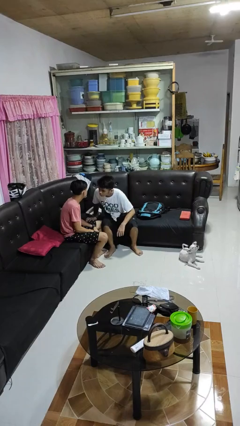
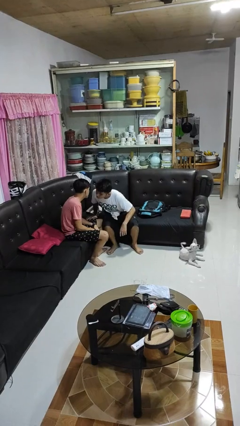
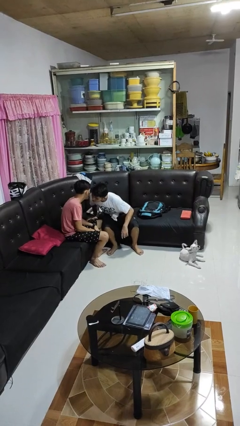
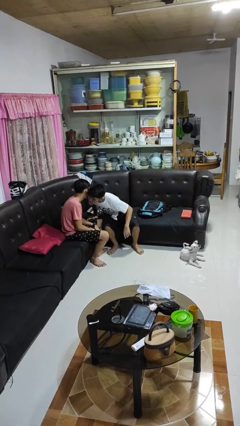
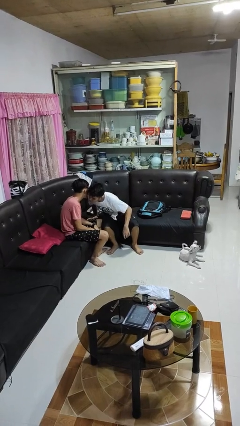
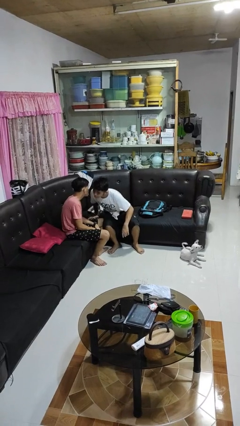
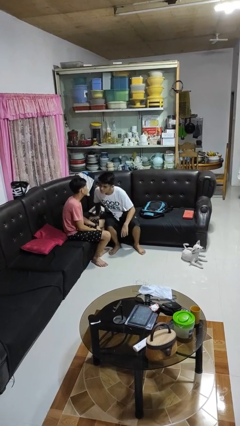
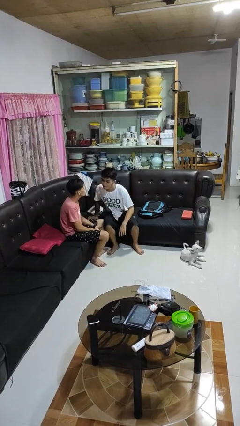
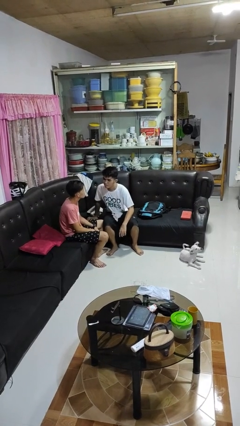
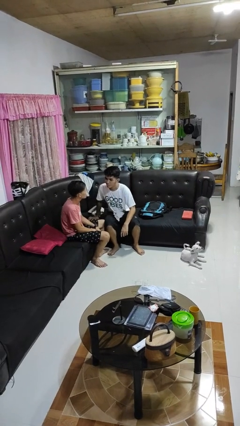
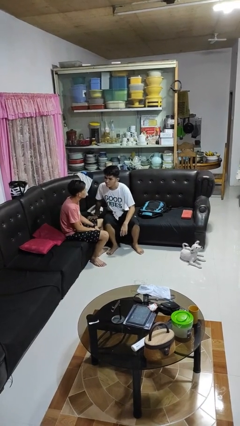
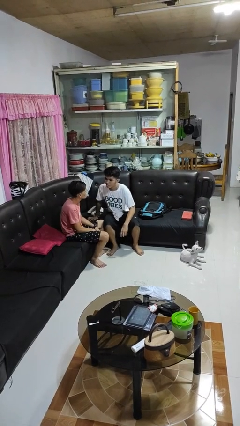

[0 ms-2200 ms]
person kisses cheek of person

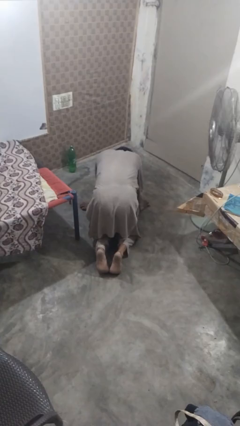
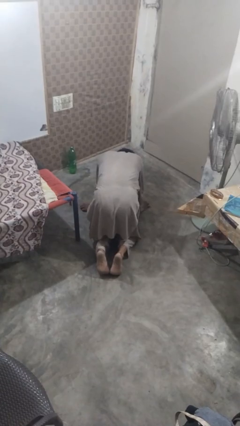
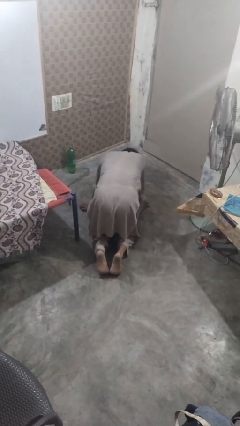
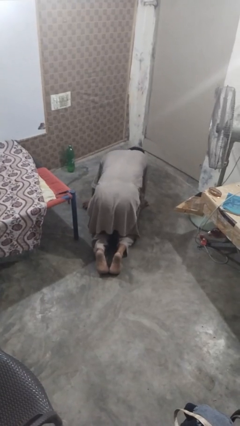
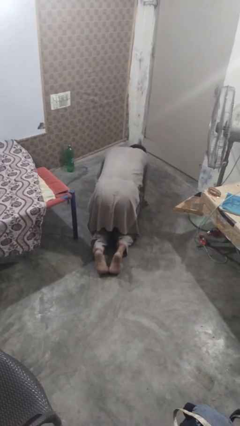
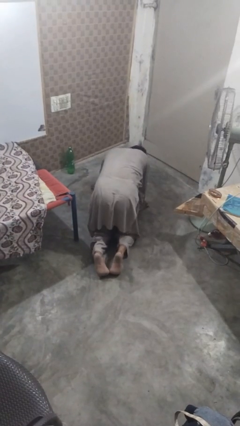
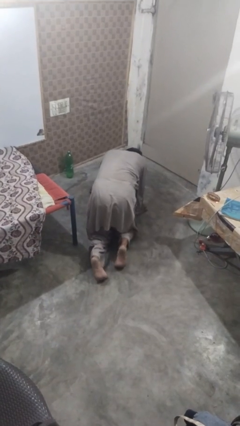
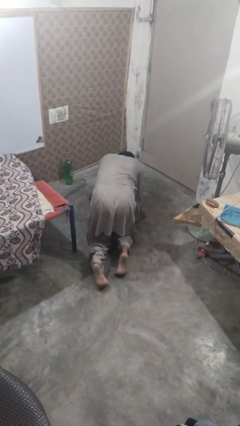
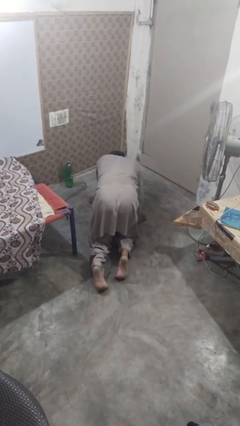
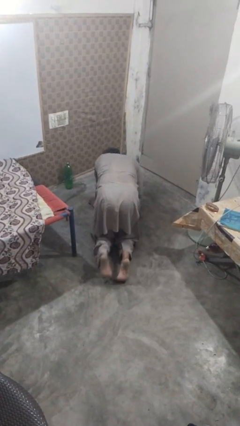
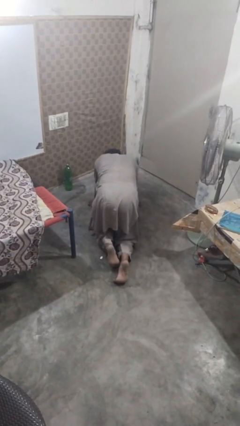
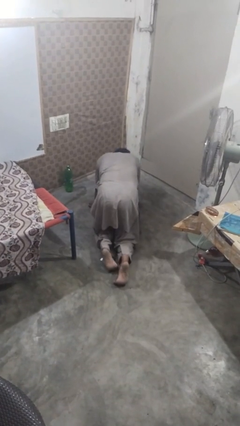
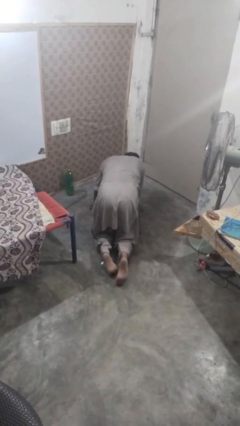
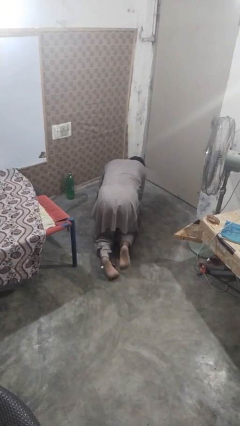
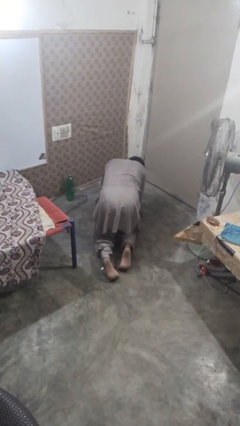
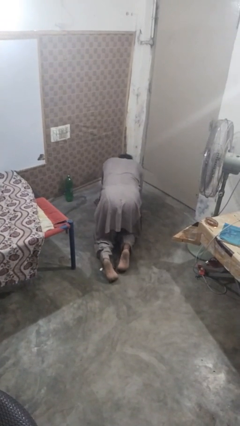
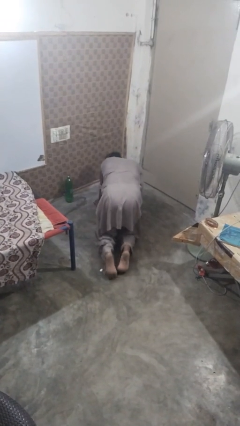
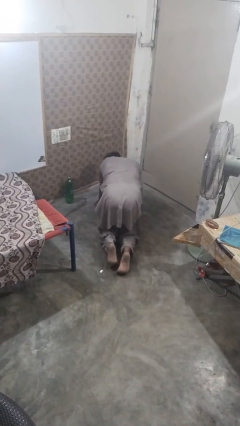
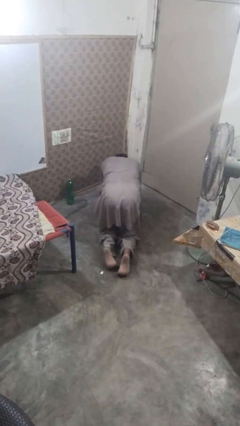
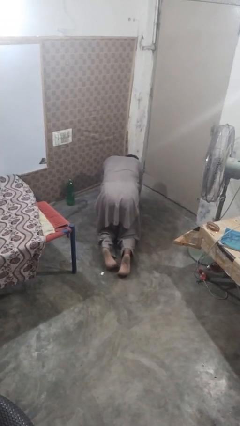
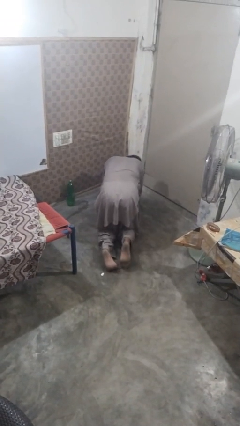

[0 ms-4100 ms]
person crawls

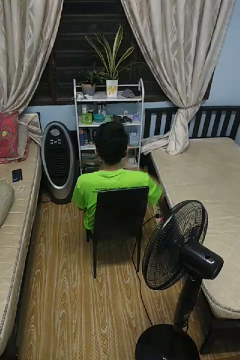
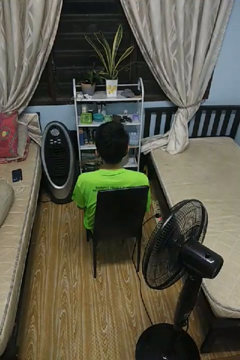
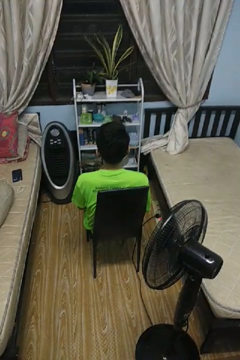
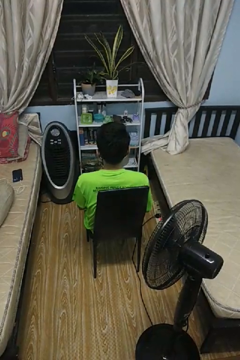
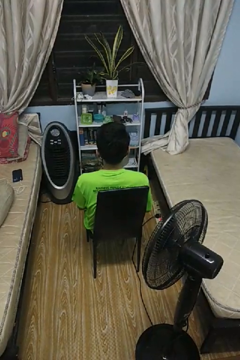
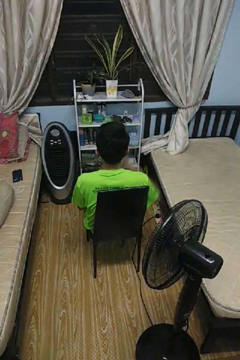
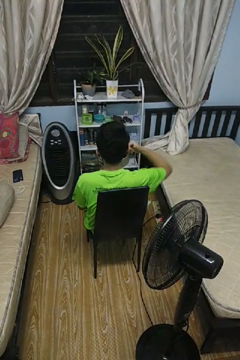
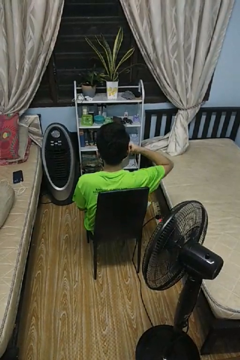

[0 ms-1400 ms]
person gestures call me

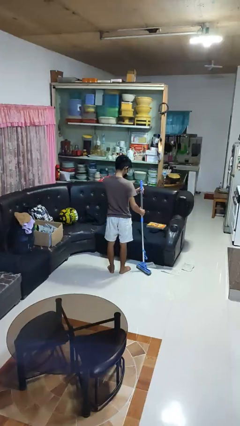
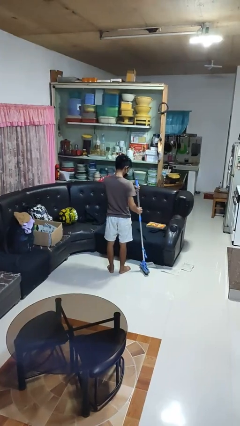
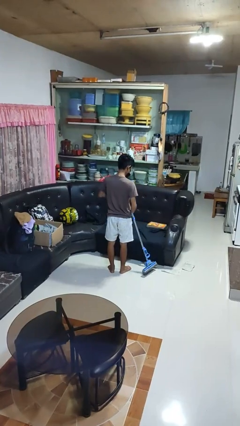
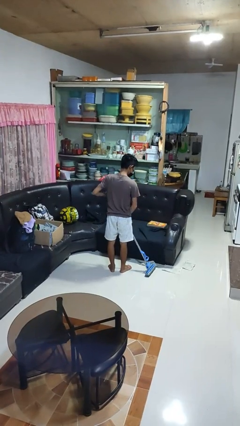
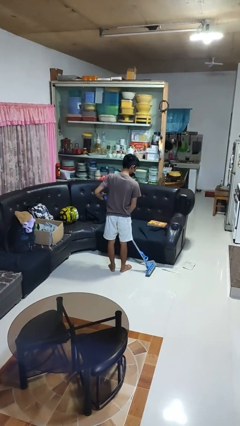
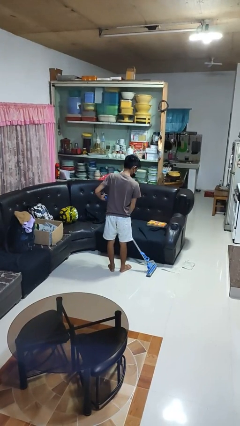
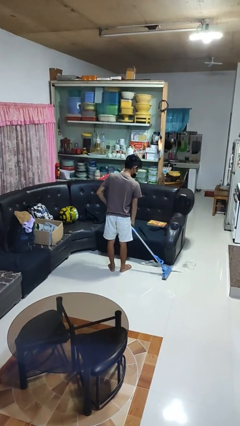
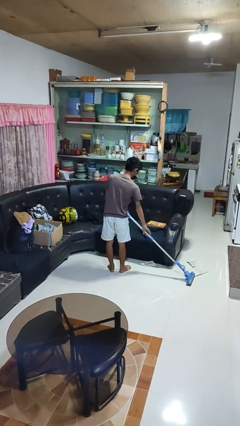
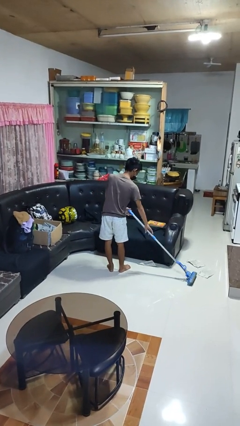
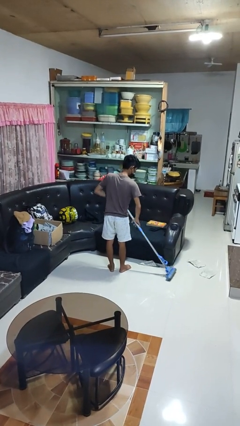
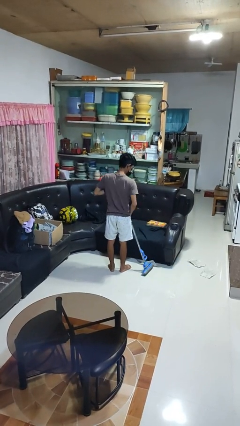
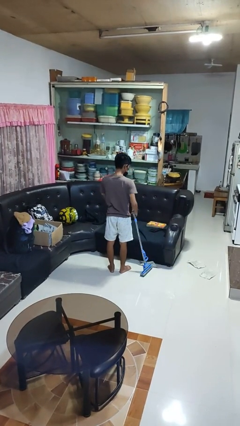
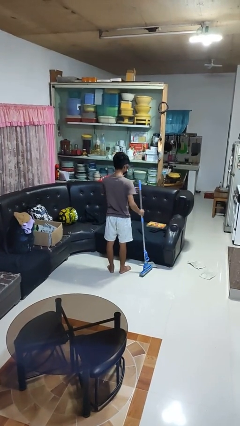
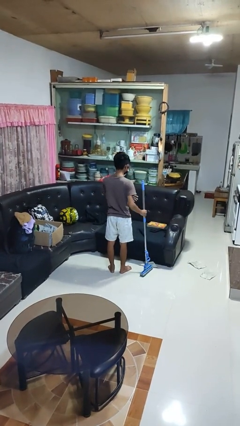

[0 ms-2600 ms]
person mops

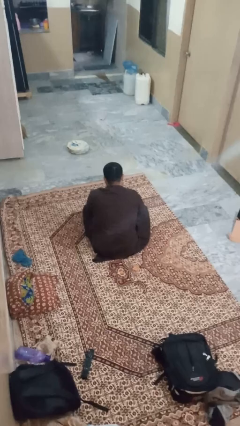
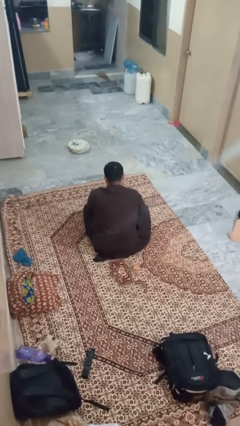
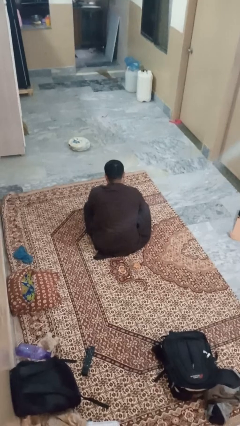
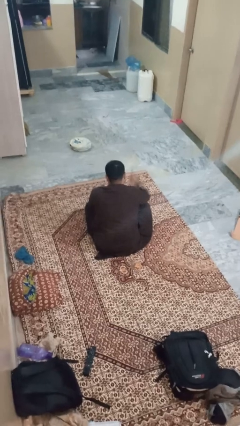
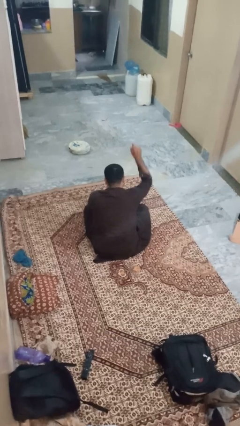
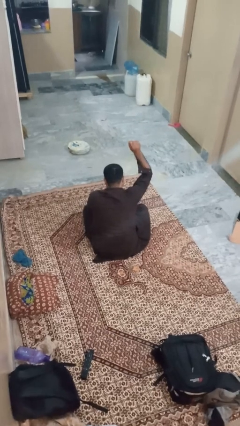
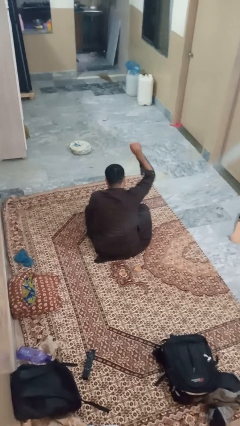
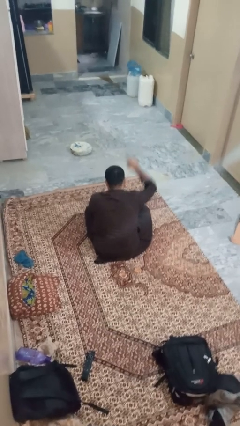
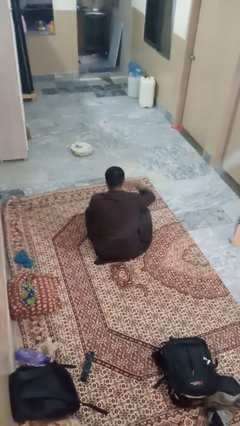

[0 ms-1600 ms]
person gestures number one

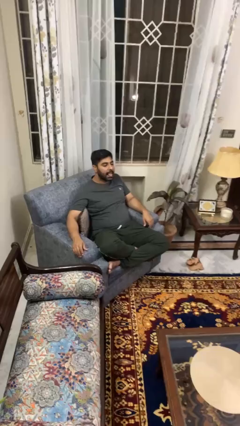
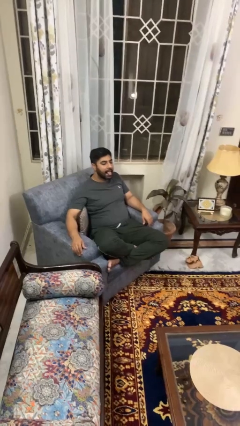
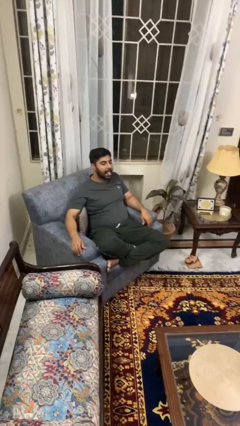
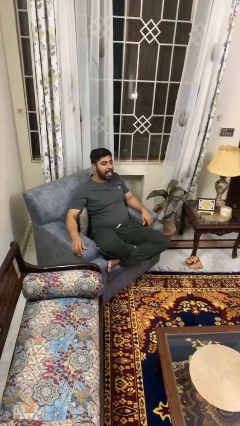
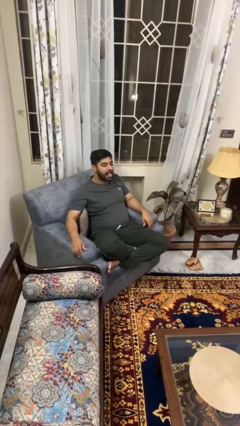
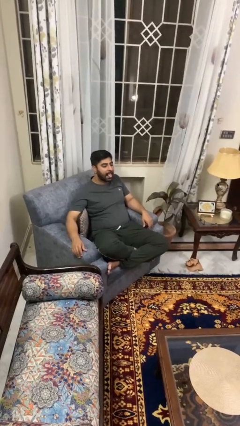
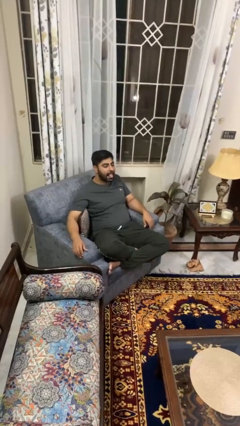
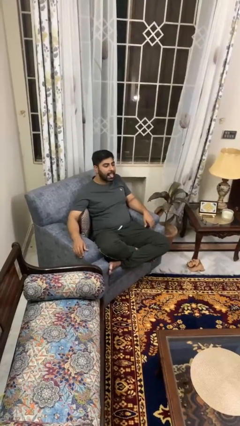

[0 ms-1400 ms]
person sticks out tongue

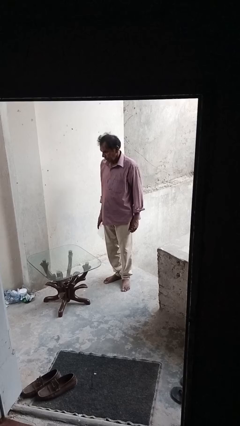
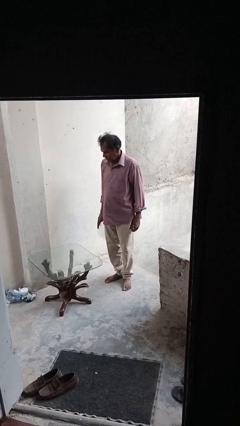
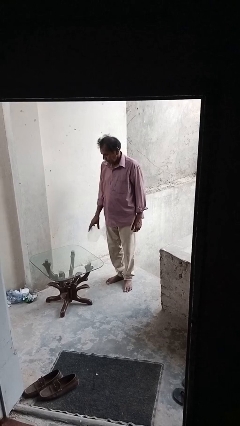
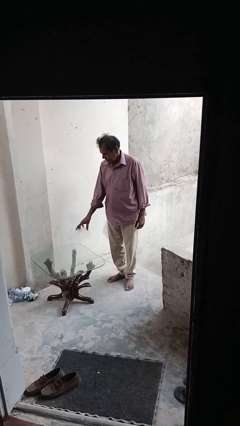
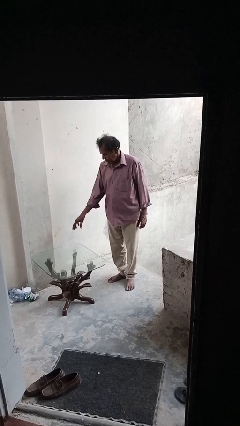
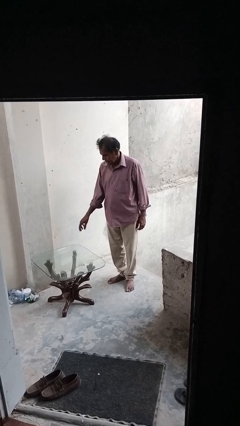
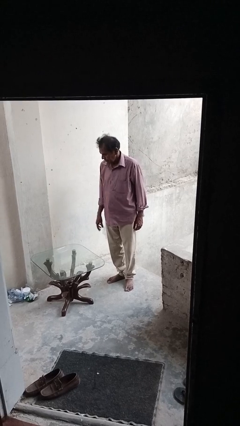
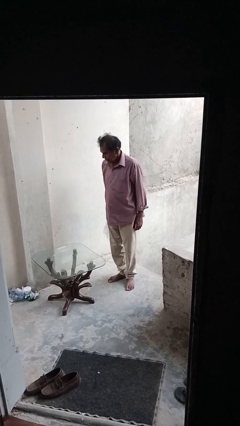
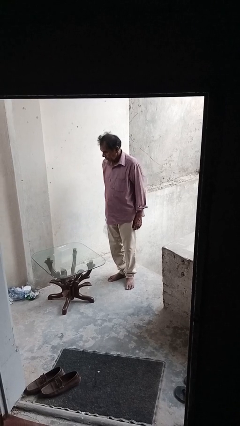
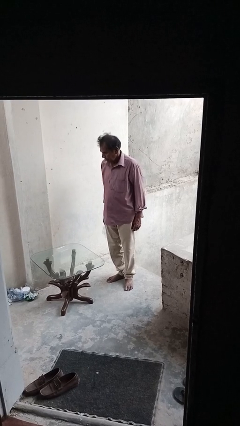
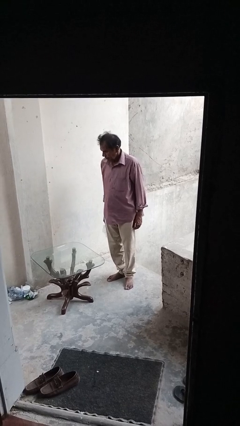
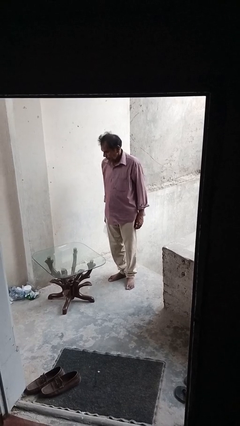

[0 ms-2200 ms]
person throws object on table

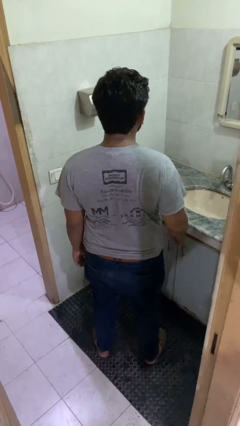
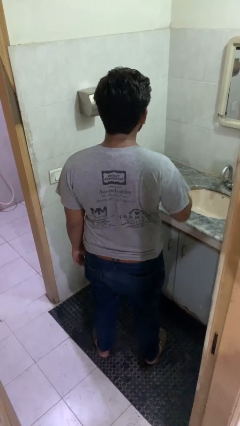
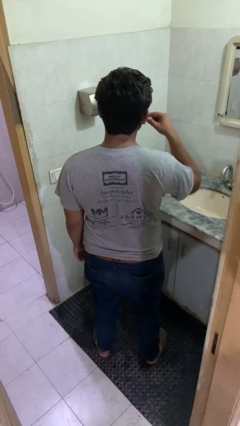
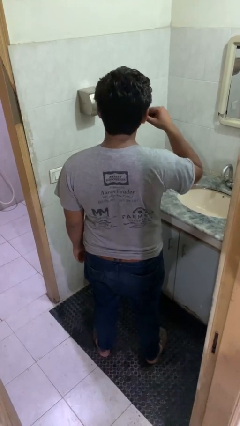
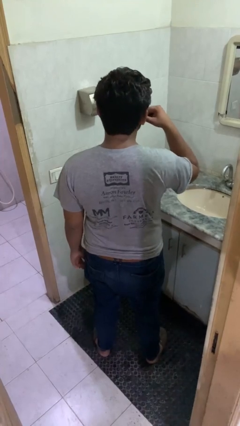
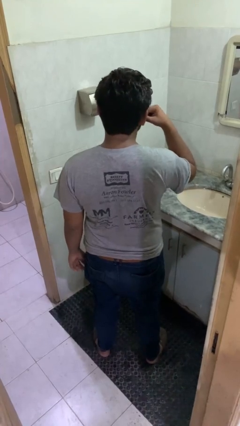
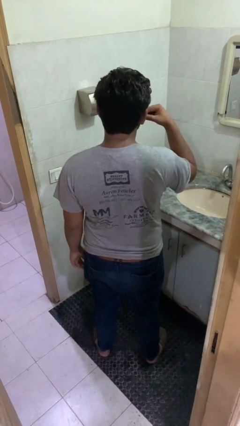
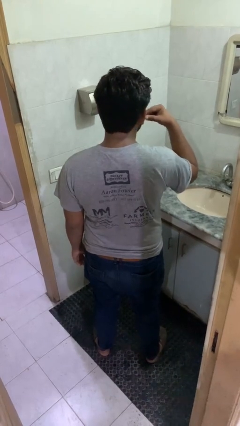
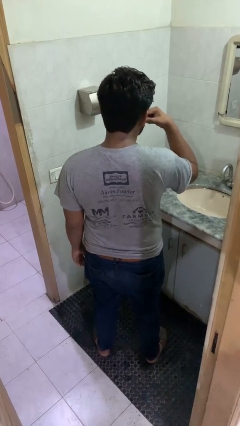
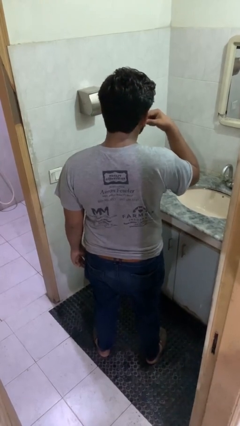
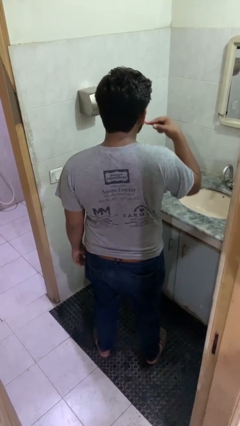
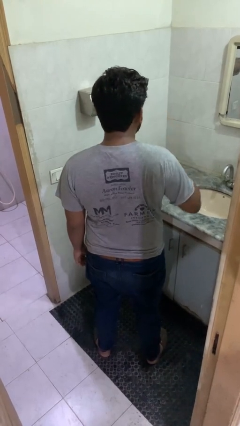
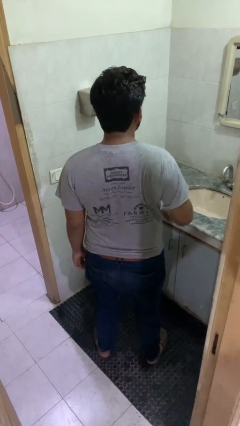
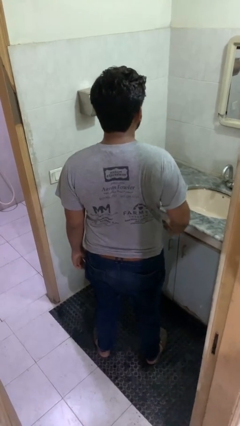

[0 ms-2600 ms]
person brushes teeth
